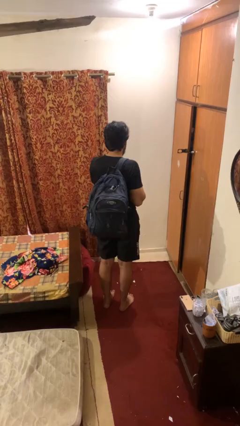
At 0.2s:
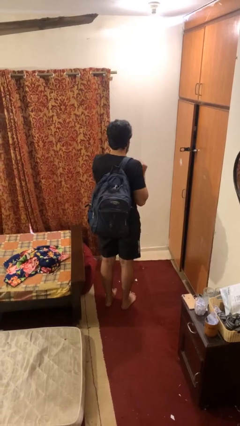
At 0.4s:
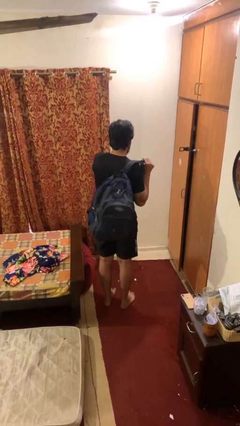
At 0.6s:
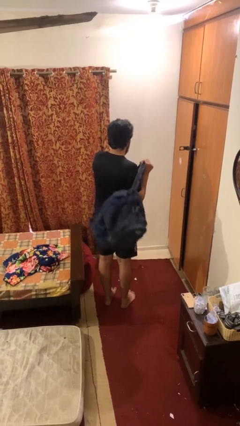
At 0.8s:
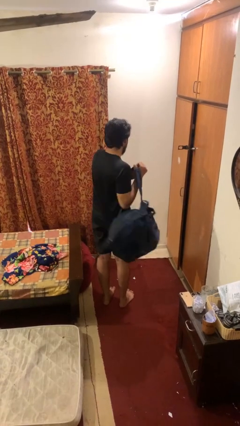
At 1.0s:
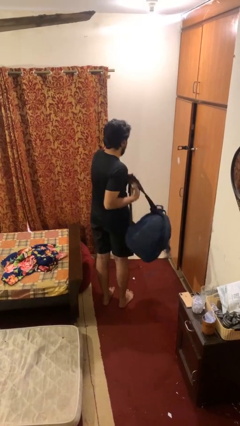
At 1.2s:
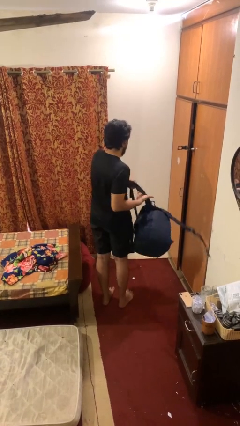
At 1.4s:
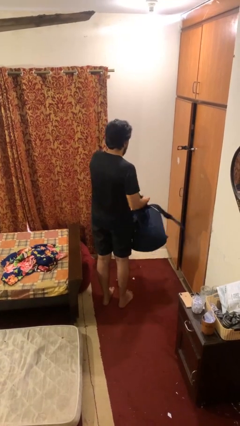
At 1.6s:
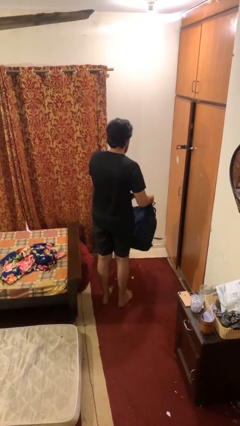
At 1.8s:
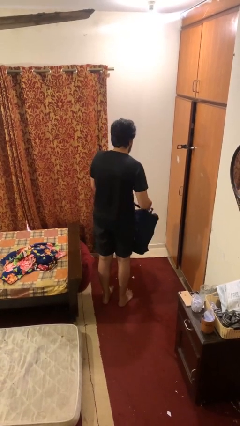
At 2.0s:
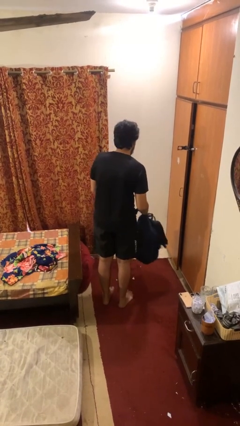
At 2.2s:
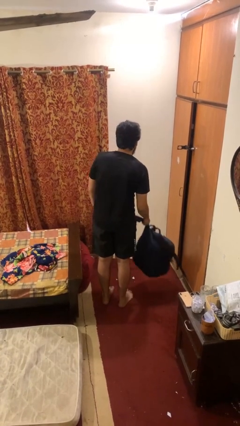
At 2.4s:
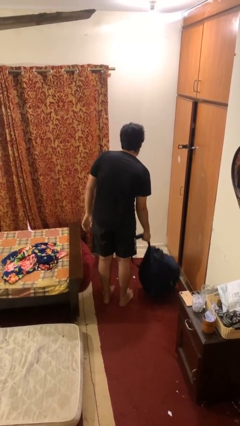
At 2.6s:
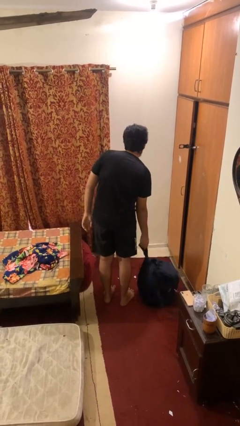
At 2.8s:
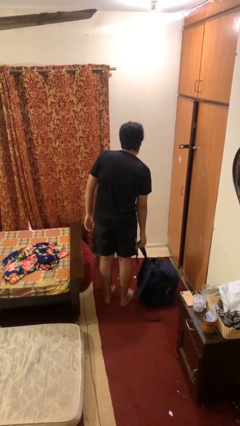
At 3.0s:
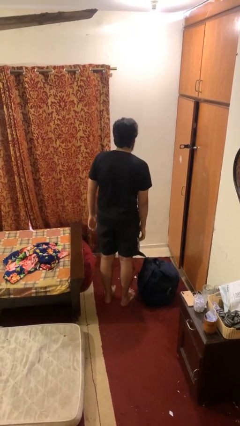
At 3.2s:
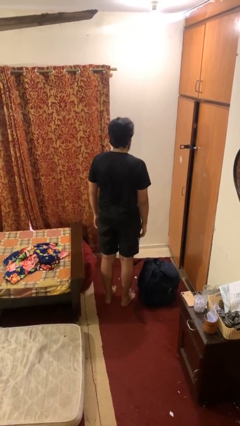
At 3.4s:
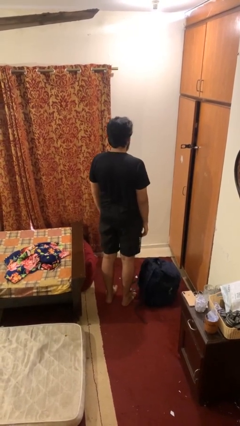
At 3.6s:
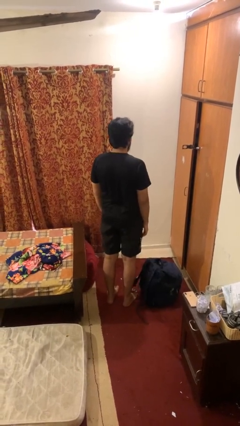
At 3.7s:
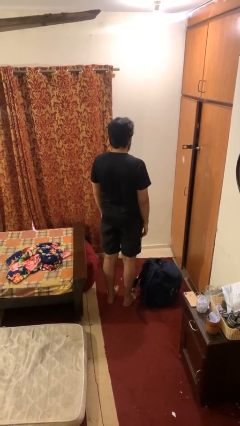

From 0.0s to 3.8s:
person takes off backpack

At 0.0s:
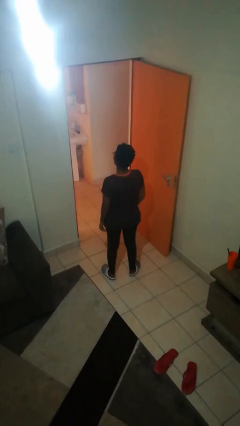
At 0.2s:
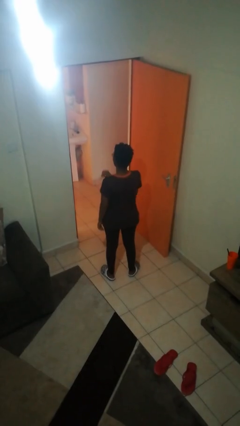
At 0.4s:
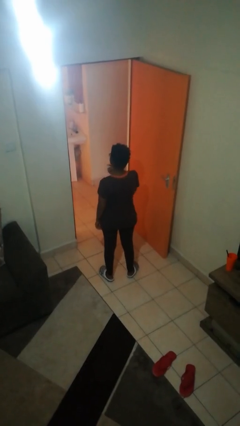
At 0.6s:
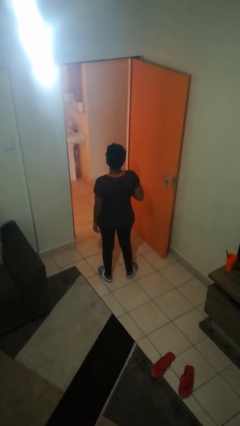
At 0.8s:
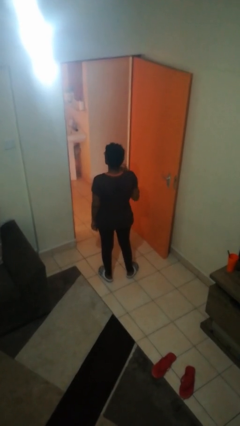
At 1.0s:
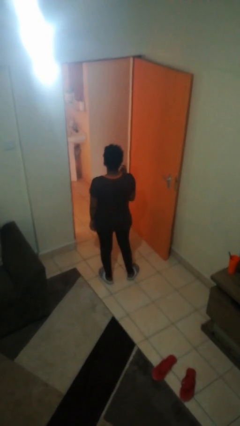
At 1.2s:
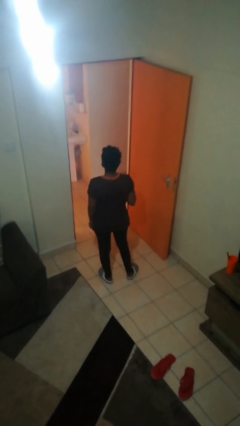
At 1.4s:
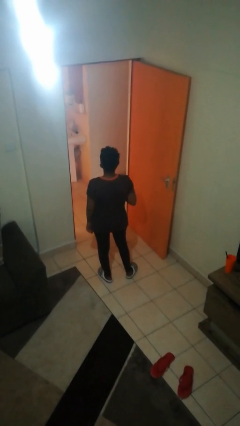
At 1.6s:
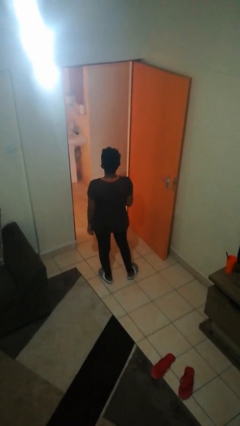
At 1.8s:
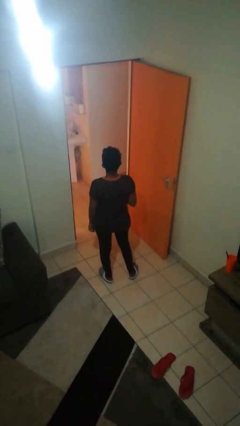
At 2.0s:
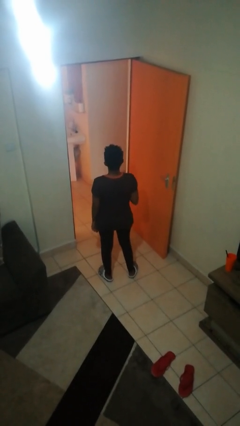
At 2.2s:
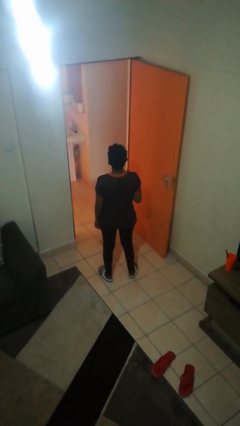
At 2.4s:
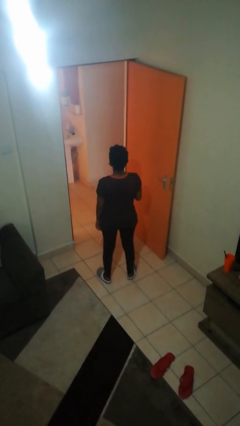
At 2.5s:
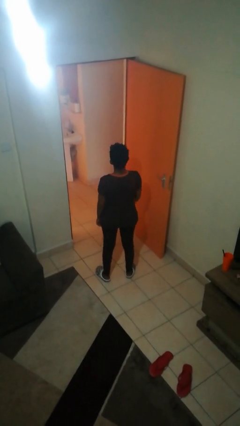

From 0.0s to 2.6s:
person snaps fingers

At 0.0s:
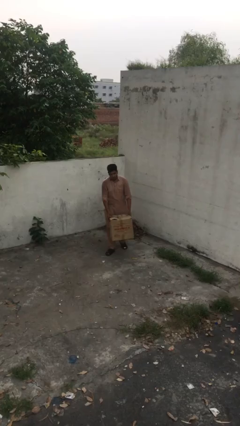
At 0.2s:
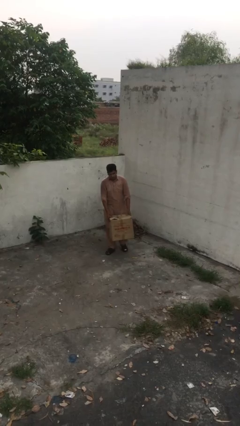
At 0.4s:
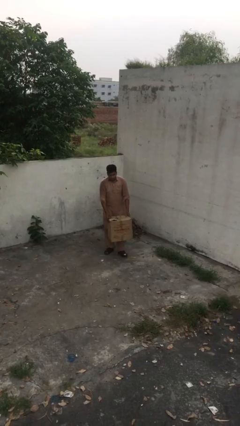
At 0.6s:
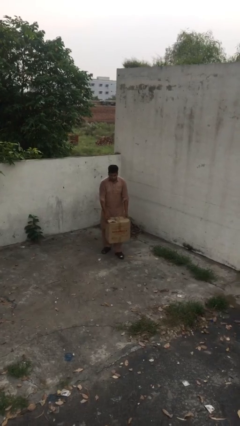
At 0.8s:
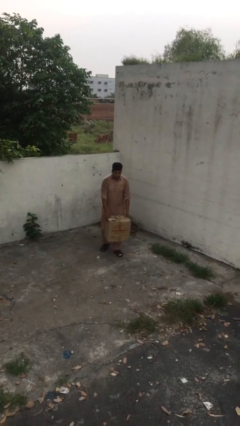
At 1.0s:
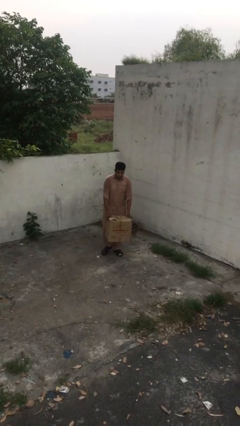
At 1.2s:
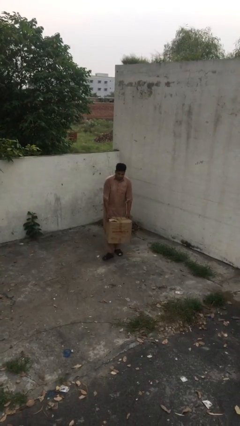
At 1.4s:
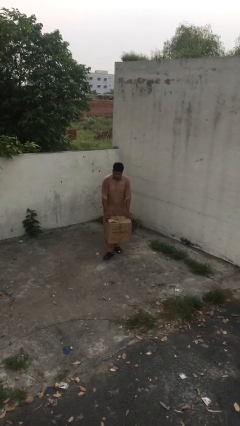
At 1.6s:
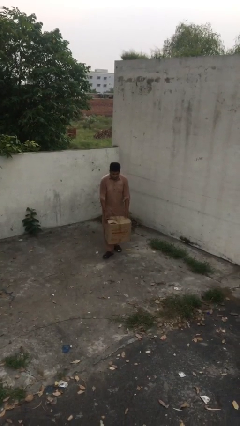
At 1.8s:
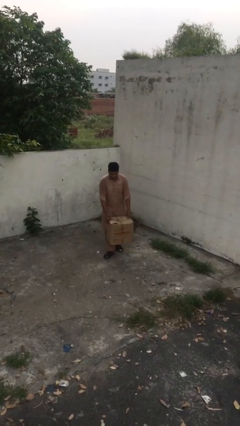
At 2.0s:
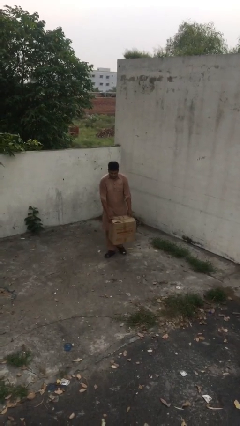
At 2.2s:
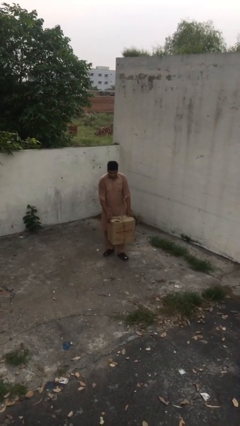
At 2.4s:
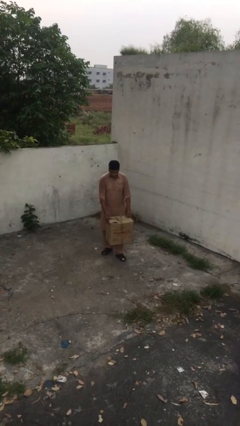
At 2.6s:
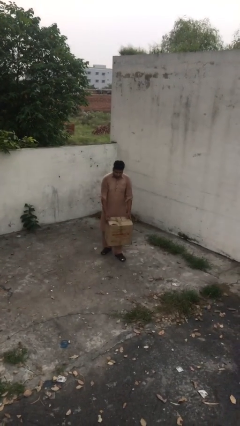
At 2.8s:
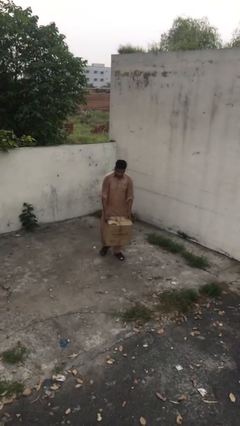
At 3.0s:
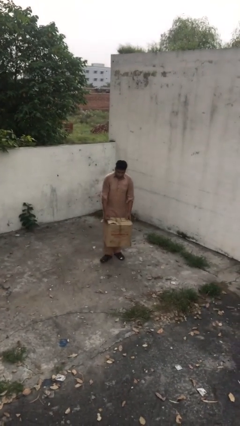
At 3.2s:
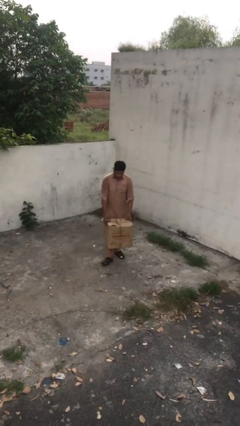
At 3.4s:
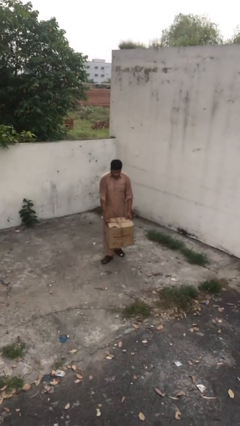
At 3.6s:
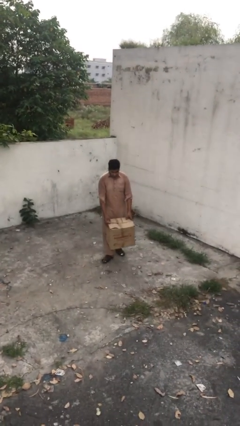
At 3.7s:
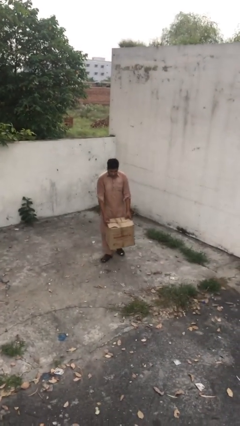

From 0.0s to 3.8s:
person carries heavy object

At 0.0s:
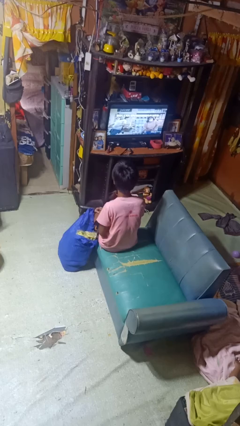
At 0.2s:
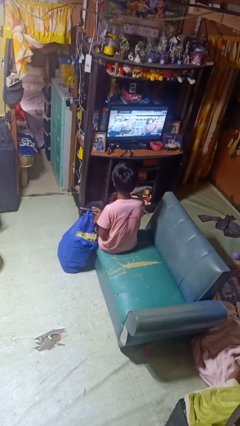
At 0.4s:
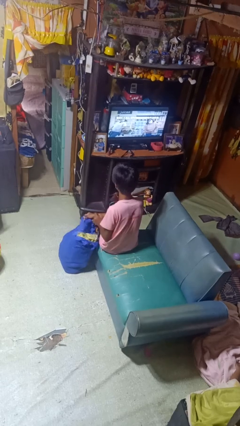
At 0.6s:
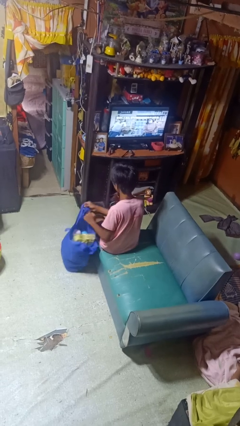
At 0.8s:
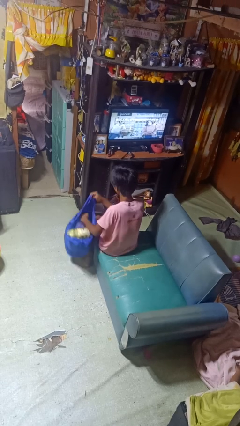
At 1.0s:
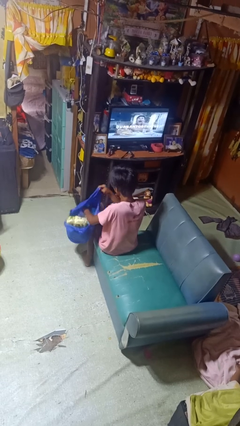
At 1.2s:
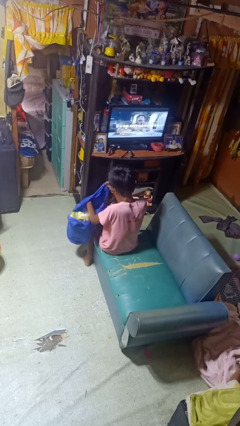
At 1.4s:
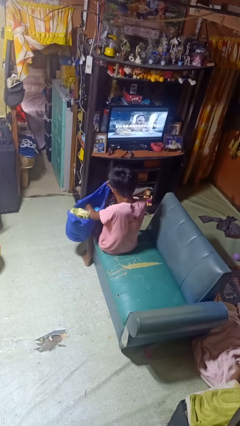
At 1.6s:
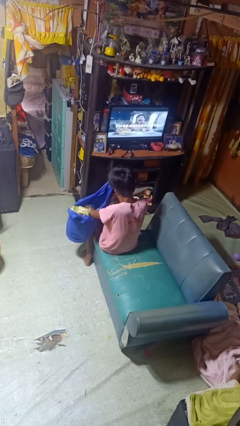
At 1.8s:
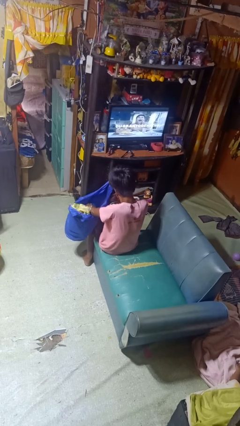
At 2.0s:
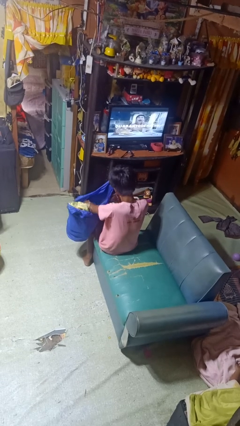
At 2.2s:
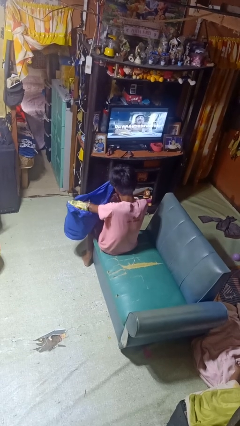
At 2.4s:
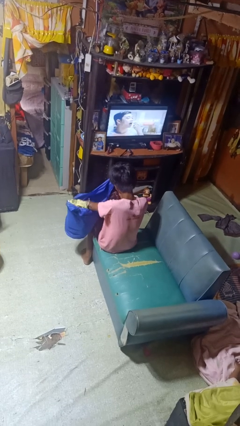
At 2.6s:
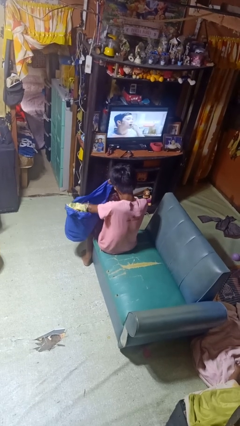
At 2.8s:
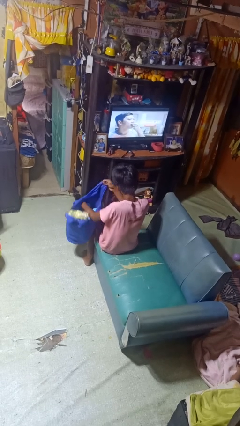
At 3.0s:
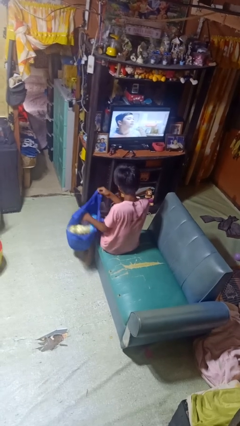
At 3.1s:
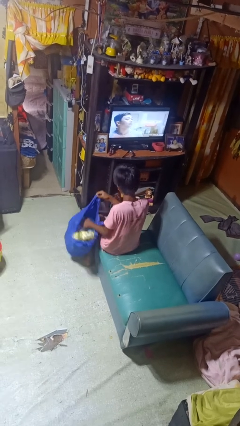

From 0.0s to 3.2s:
person searches in bag

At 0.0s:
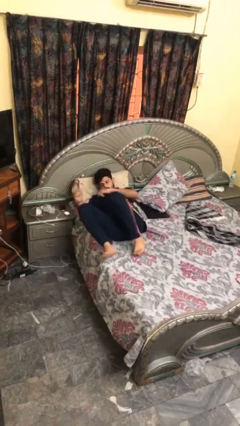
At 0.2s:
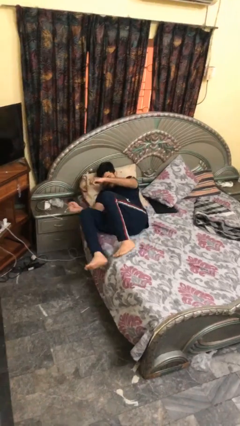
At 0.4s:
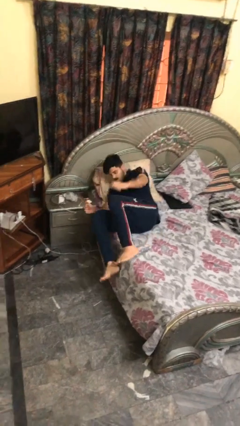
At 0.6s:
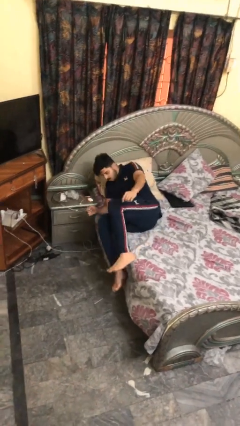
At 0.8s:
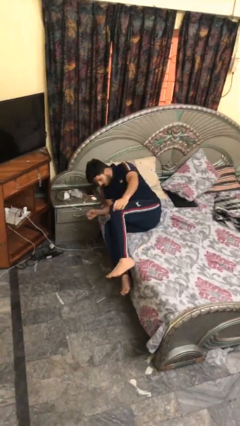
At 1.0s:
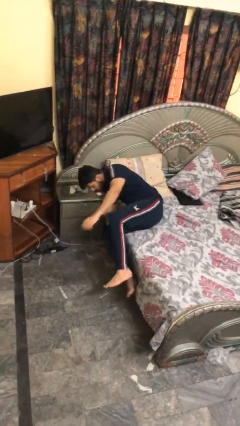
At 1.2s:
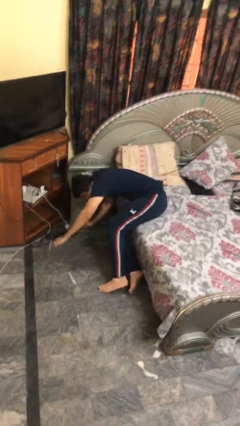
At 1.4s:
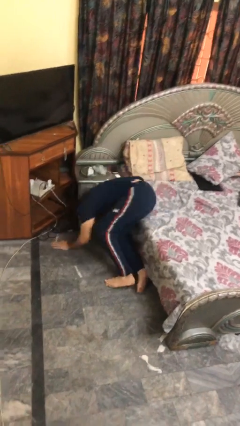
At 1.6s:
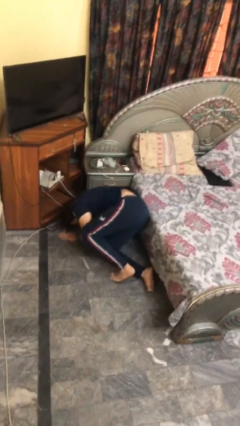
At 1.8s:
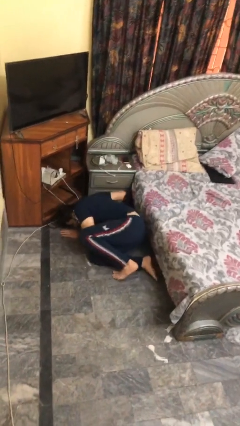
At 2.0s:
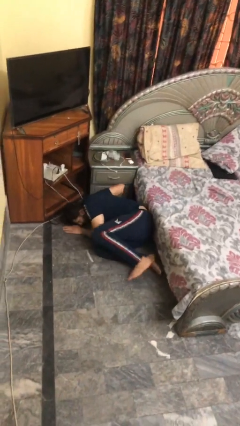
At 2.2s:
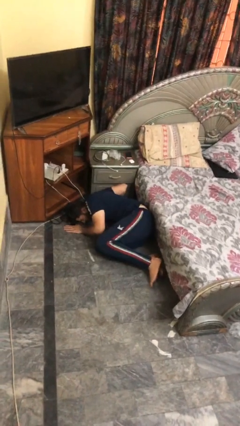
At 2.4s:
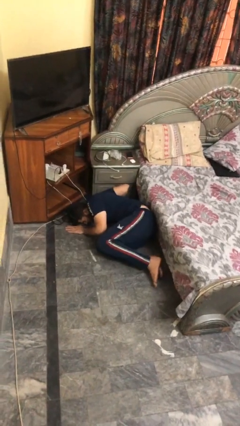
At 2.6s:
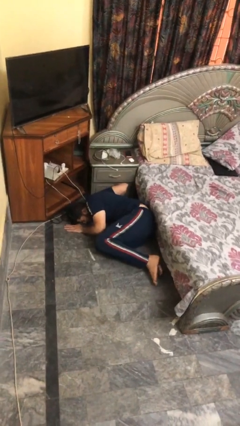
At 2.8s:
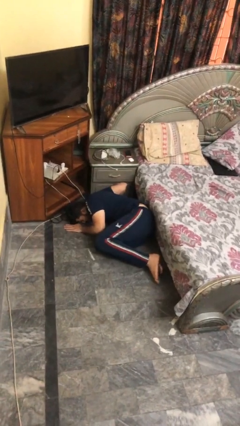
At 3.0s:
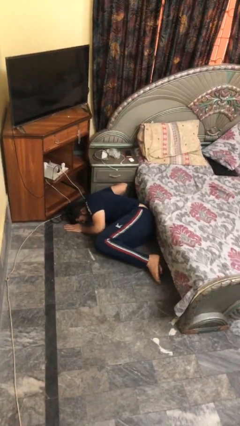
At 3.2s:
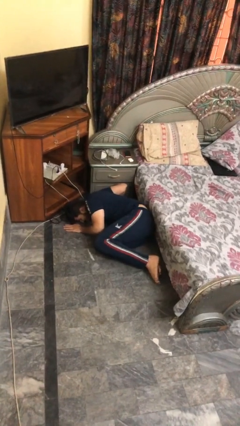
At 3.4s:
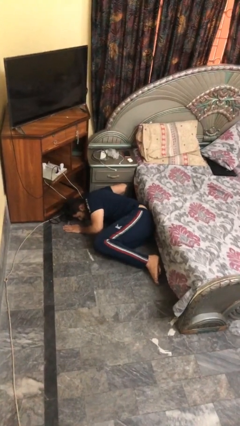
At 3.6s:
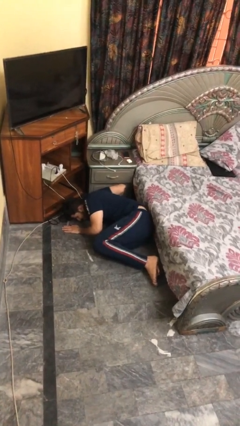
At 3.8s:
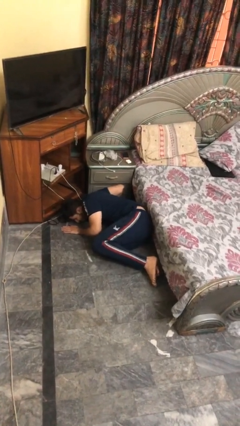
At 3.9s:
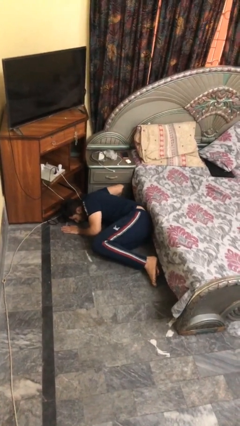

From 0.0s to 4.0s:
person falls from bed
